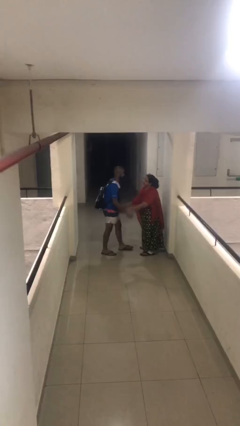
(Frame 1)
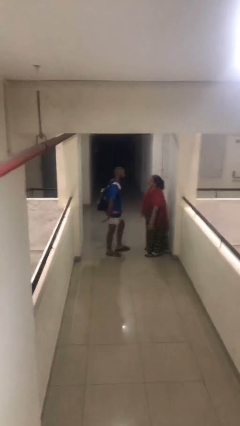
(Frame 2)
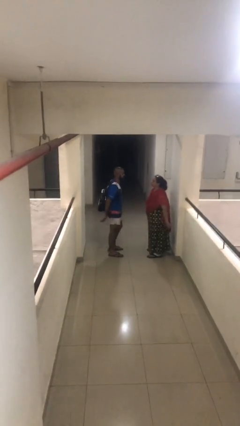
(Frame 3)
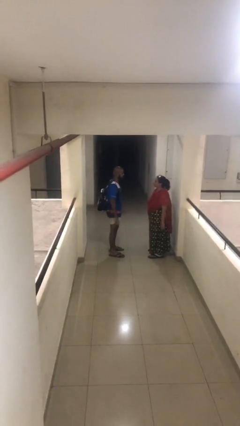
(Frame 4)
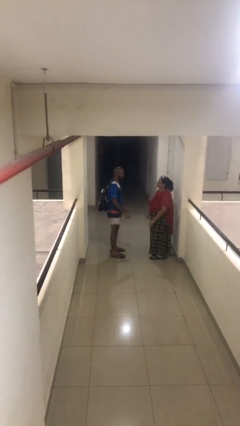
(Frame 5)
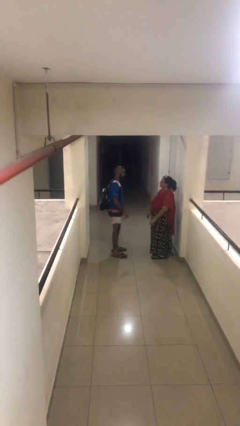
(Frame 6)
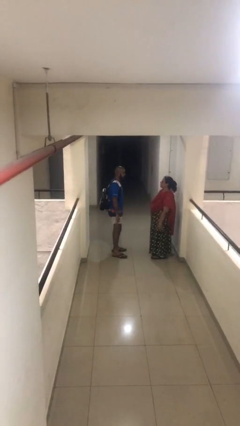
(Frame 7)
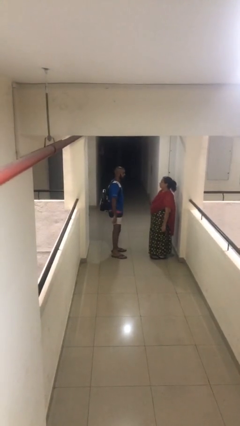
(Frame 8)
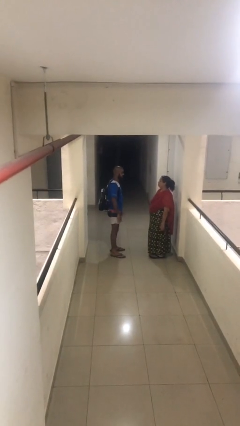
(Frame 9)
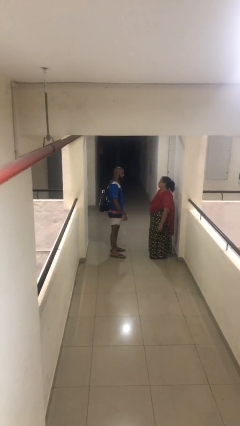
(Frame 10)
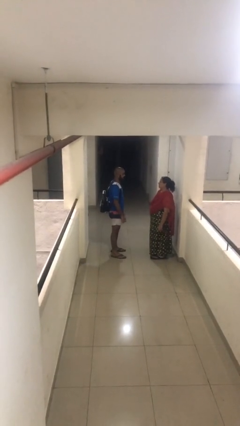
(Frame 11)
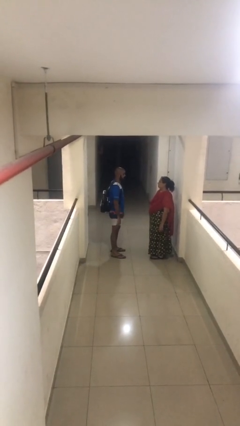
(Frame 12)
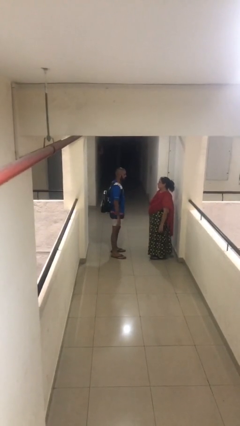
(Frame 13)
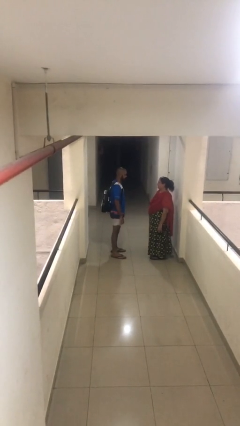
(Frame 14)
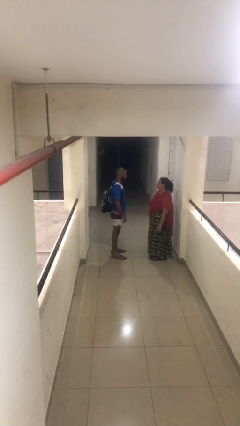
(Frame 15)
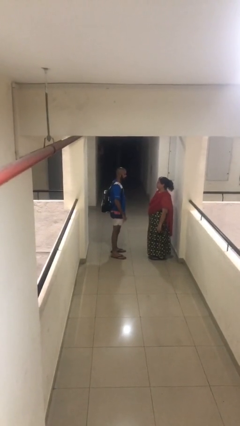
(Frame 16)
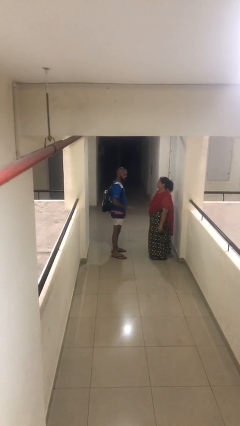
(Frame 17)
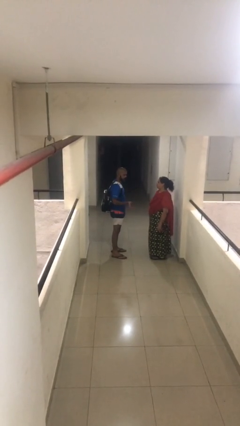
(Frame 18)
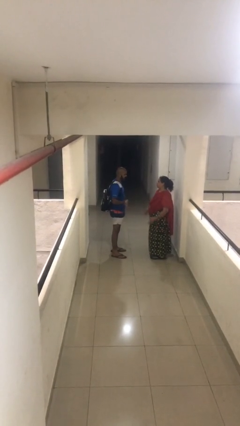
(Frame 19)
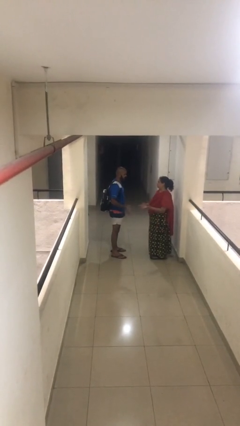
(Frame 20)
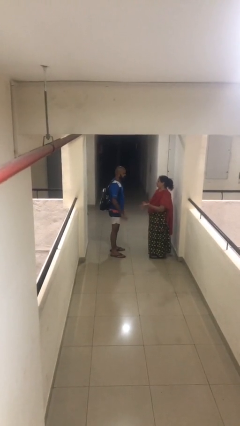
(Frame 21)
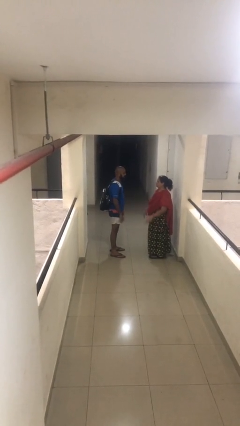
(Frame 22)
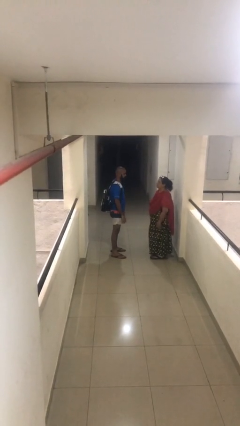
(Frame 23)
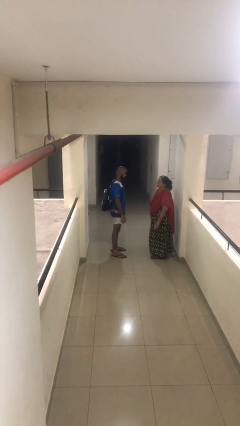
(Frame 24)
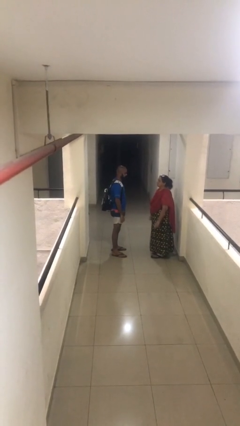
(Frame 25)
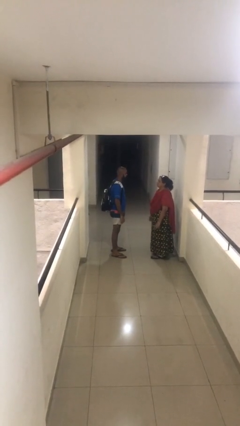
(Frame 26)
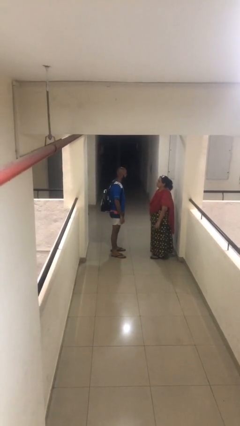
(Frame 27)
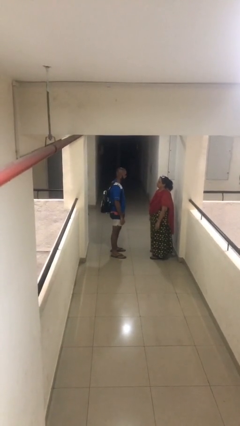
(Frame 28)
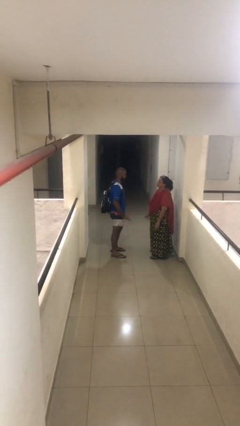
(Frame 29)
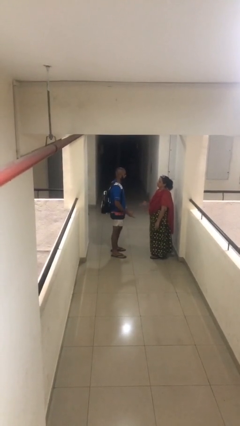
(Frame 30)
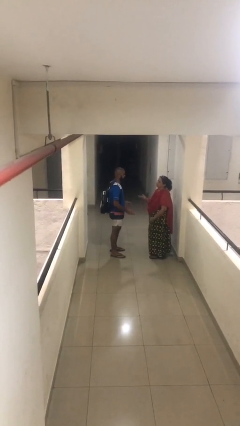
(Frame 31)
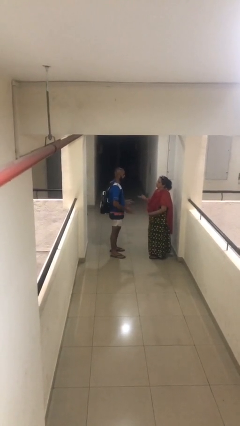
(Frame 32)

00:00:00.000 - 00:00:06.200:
person talks to person

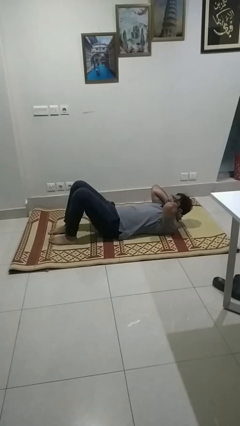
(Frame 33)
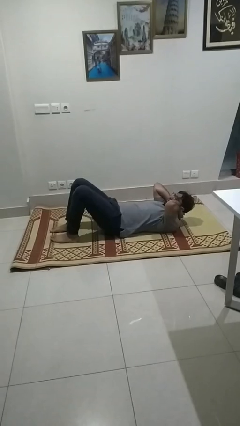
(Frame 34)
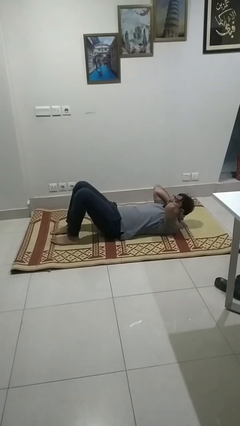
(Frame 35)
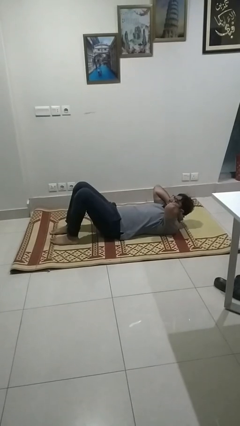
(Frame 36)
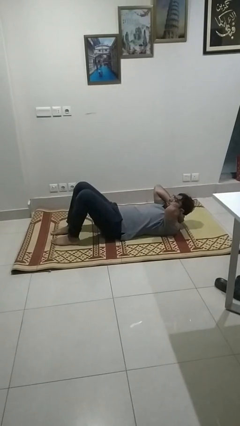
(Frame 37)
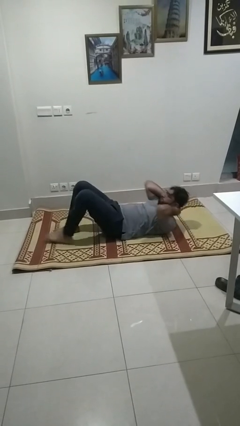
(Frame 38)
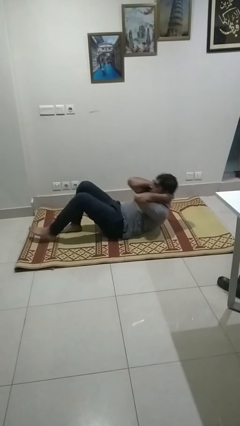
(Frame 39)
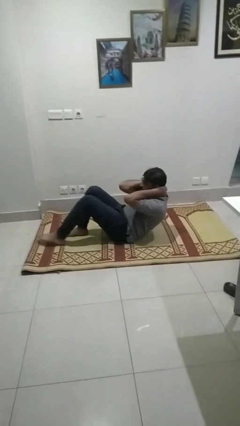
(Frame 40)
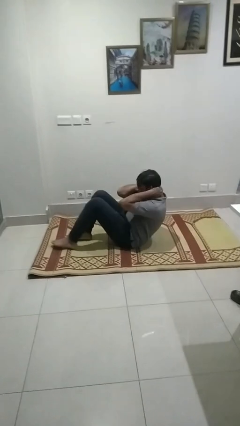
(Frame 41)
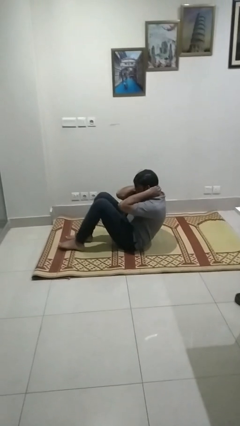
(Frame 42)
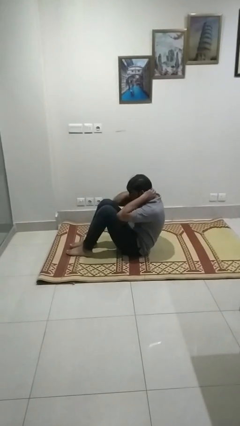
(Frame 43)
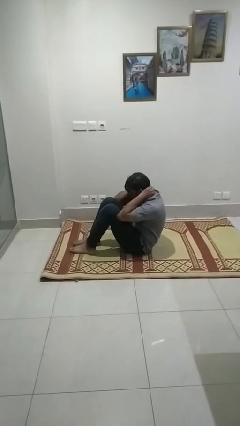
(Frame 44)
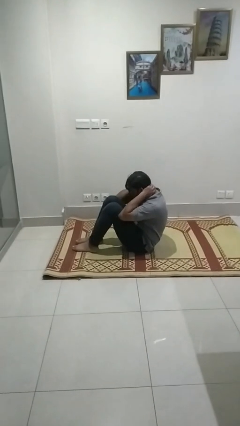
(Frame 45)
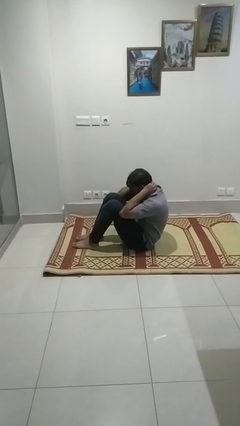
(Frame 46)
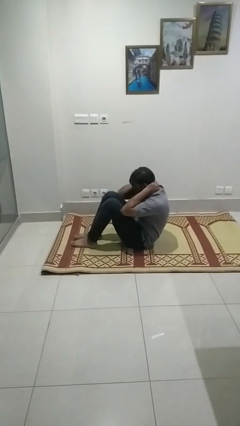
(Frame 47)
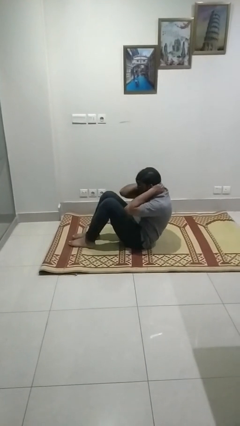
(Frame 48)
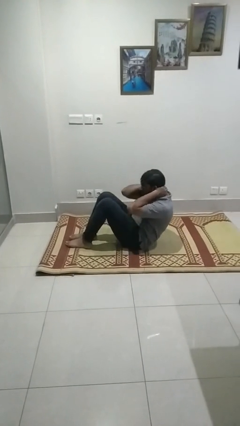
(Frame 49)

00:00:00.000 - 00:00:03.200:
person exercises with situp

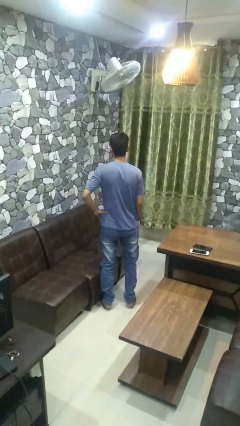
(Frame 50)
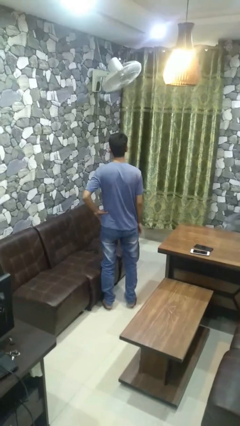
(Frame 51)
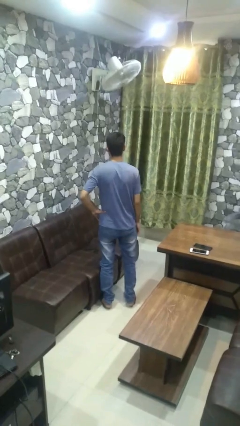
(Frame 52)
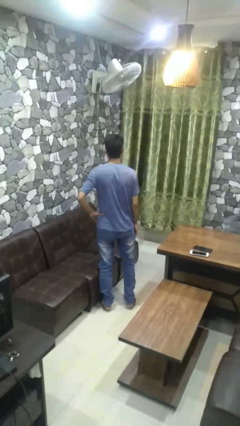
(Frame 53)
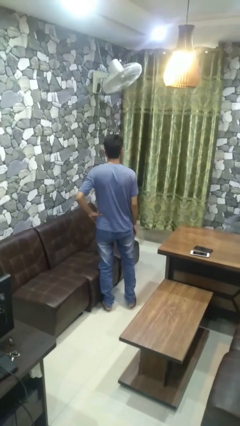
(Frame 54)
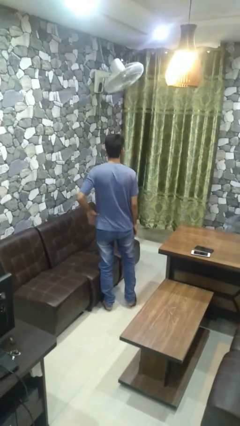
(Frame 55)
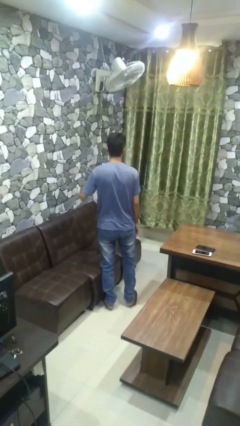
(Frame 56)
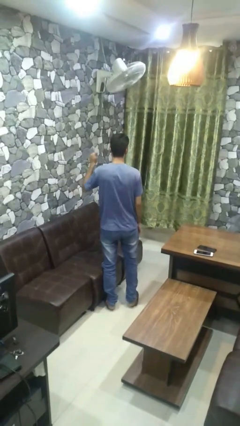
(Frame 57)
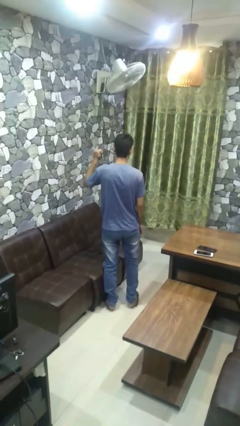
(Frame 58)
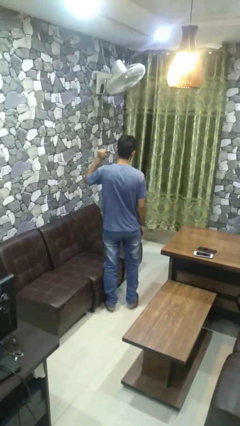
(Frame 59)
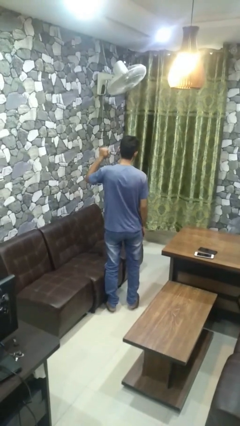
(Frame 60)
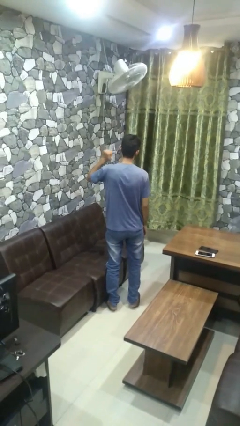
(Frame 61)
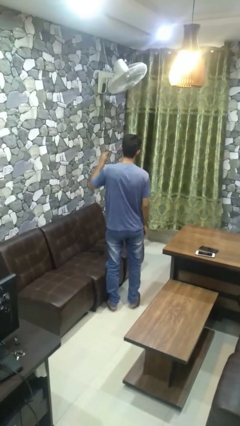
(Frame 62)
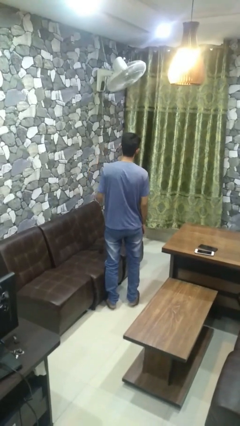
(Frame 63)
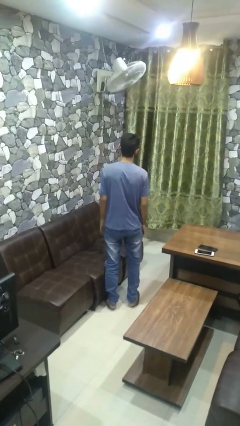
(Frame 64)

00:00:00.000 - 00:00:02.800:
person gestures behind me

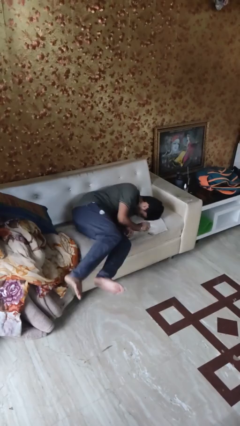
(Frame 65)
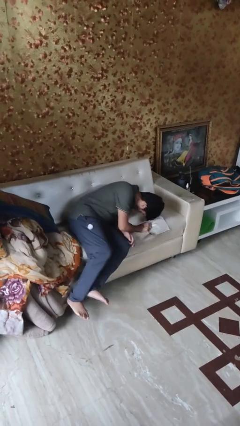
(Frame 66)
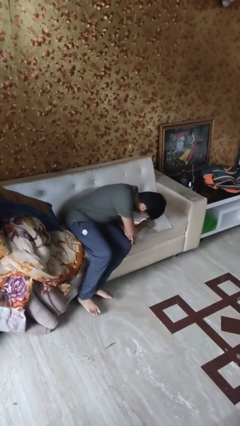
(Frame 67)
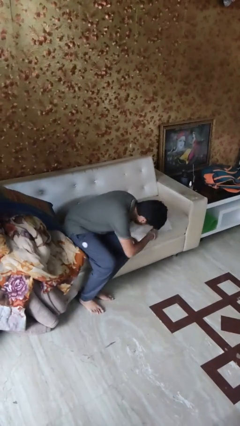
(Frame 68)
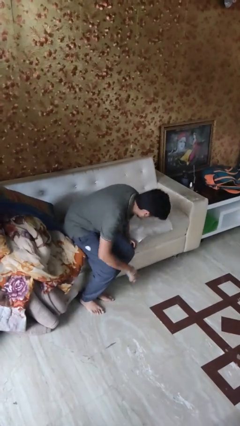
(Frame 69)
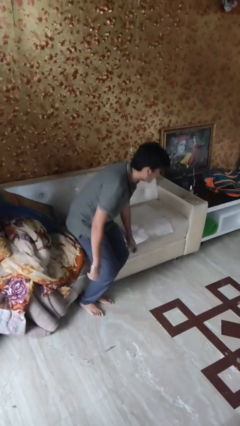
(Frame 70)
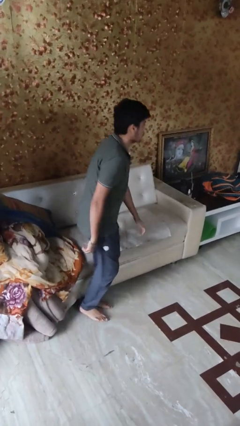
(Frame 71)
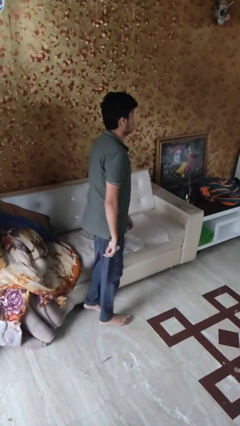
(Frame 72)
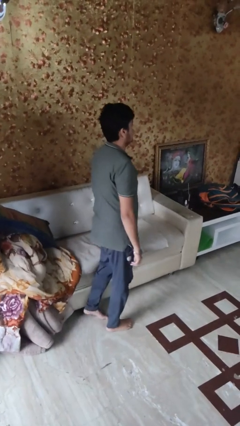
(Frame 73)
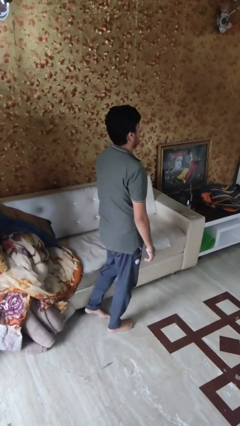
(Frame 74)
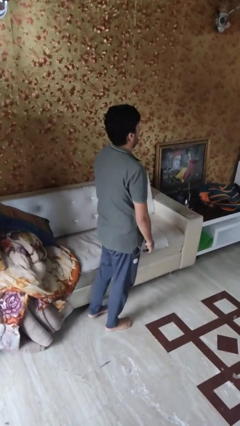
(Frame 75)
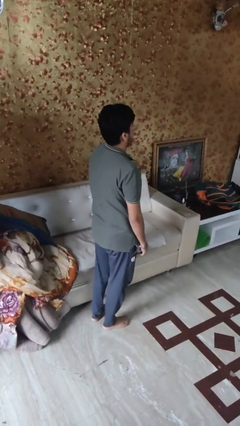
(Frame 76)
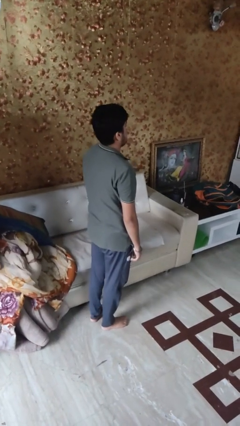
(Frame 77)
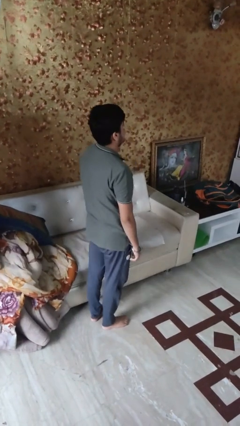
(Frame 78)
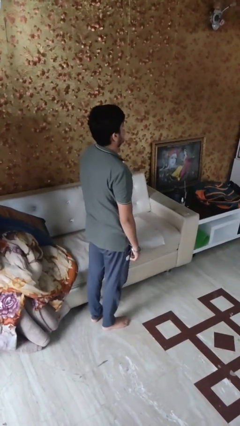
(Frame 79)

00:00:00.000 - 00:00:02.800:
person stands up

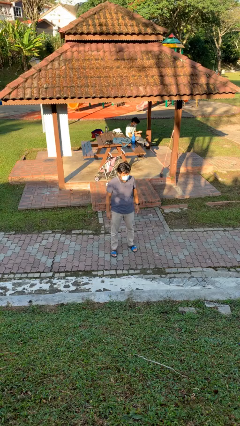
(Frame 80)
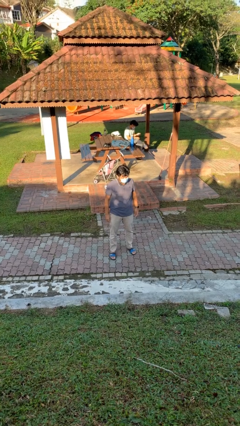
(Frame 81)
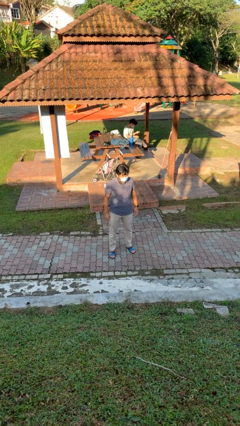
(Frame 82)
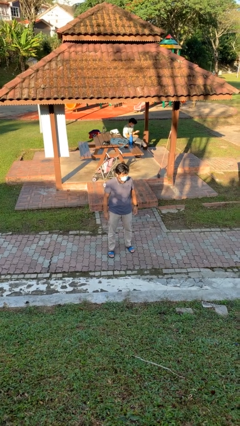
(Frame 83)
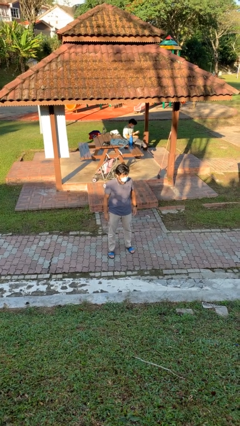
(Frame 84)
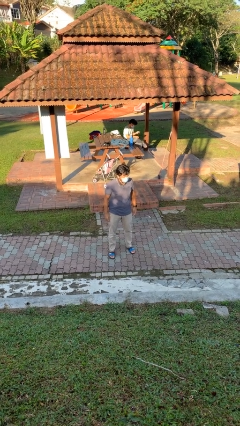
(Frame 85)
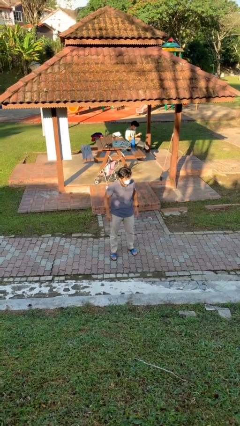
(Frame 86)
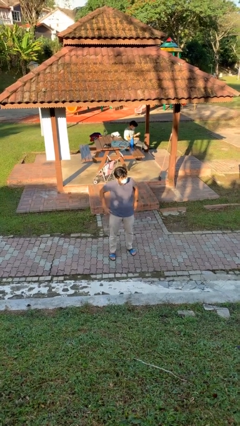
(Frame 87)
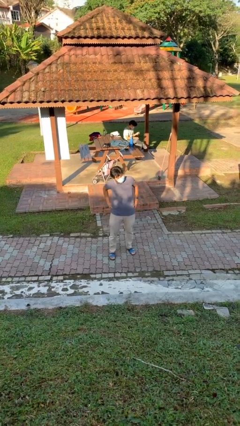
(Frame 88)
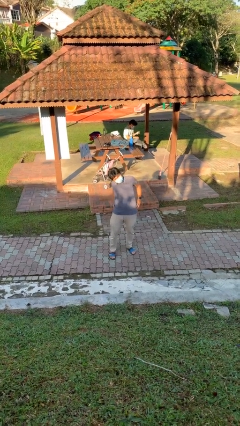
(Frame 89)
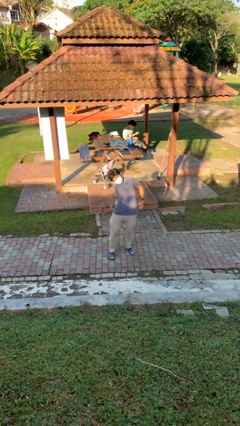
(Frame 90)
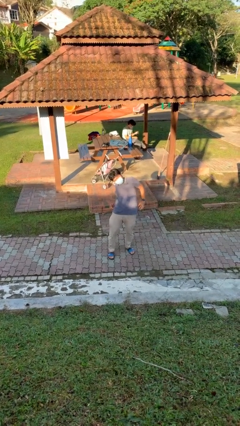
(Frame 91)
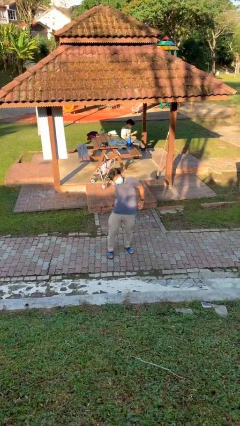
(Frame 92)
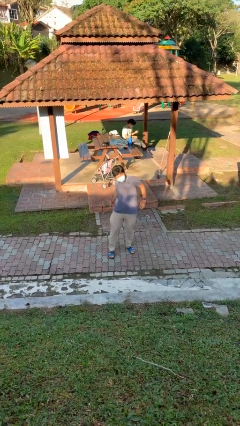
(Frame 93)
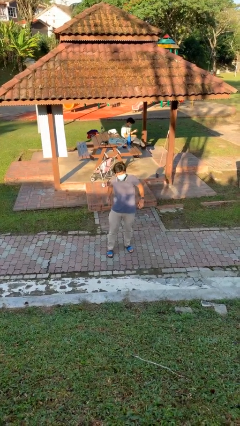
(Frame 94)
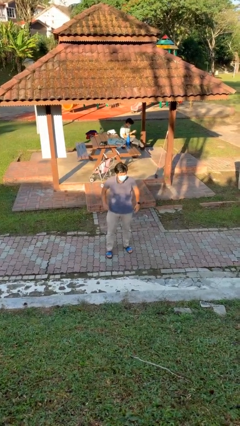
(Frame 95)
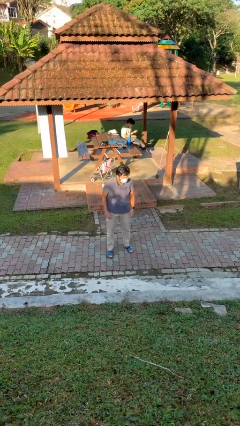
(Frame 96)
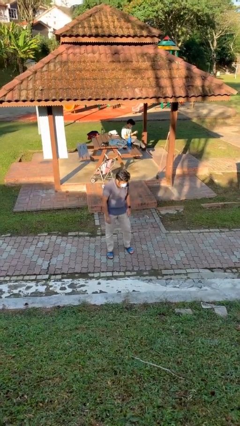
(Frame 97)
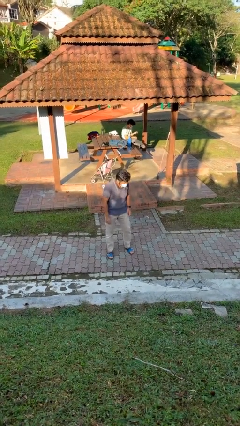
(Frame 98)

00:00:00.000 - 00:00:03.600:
person stretches back
